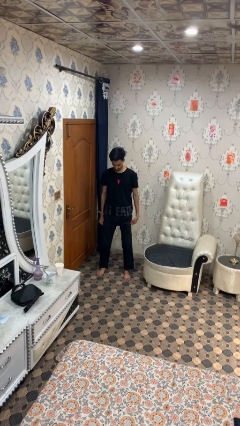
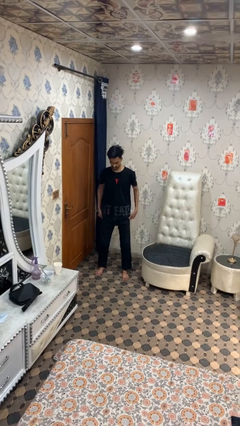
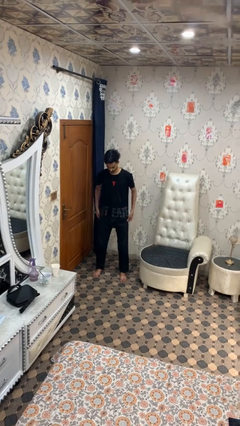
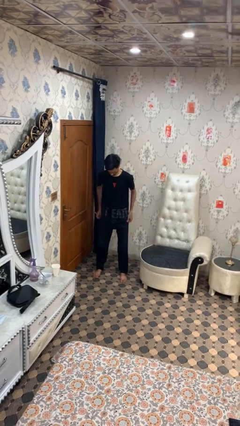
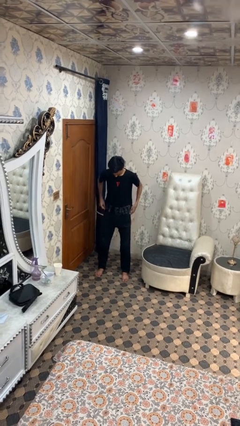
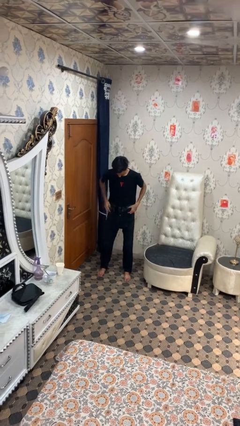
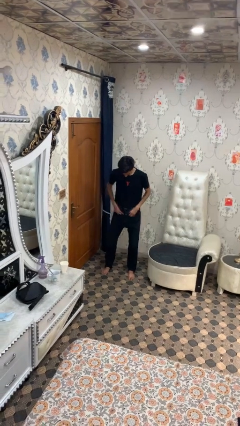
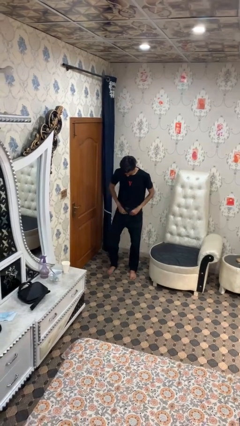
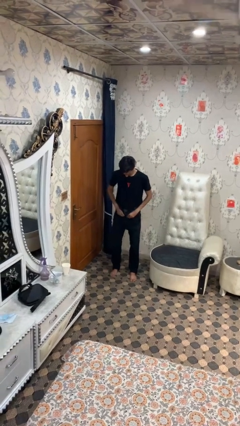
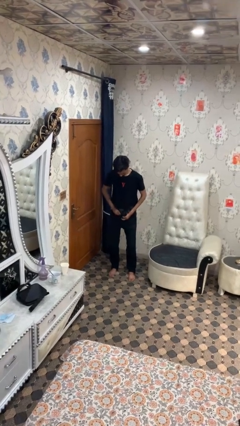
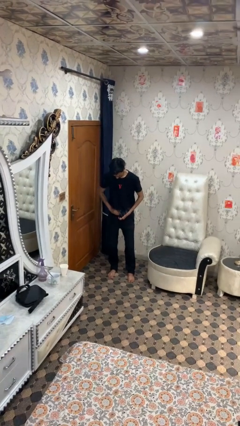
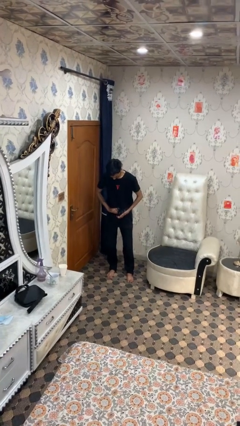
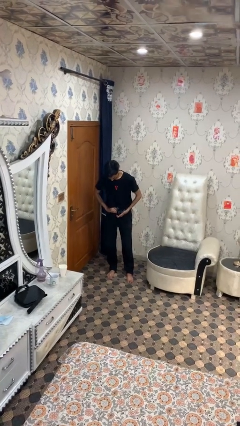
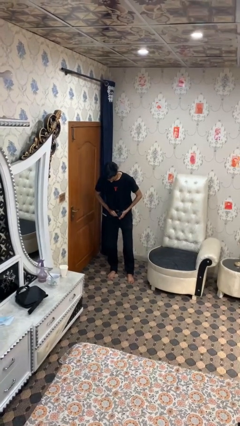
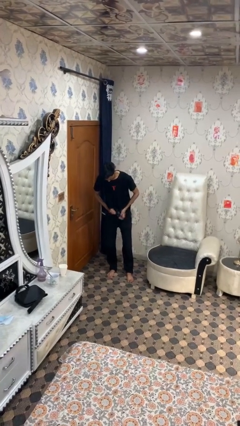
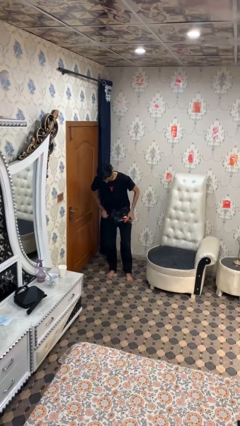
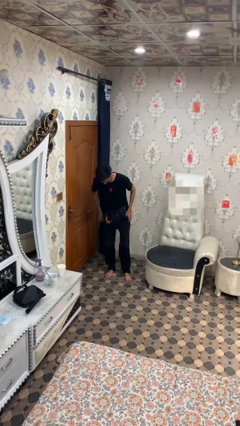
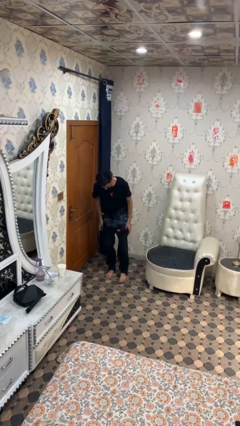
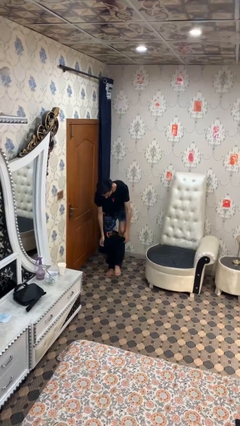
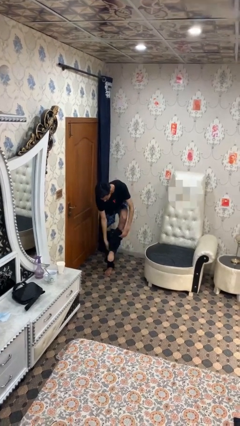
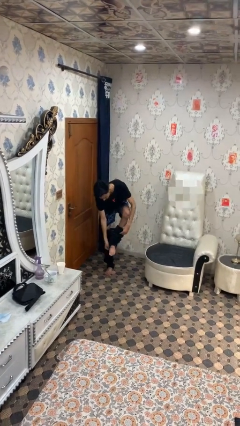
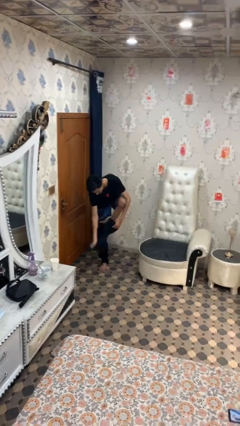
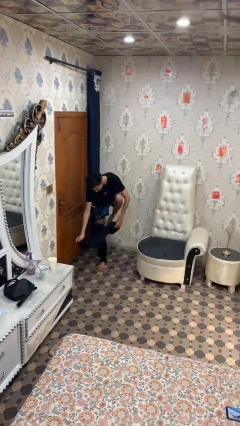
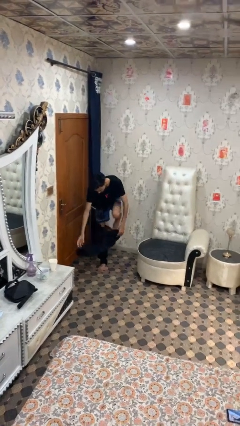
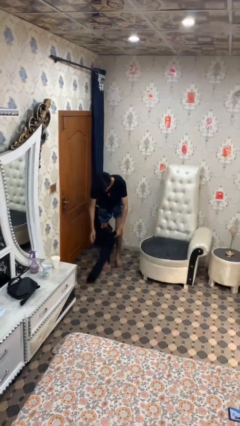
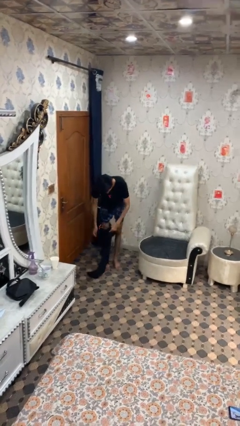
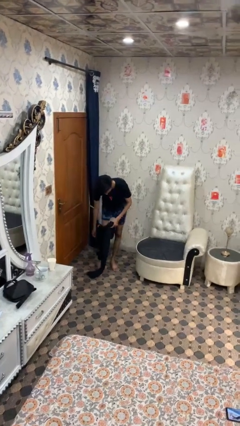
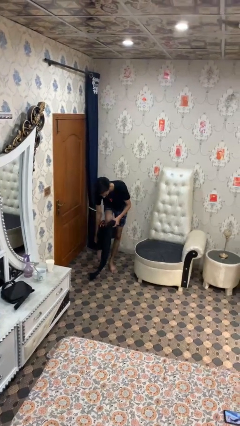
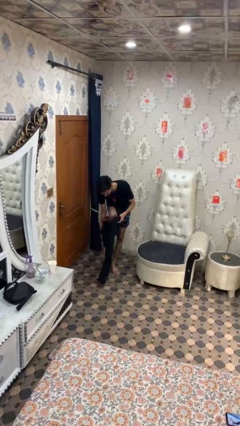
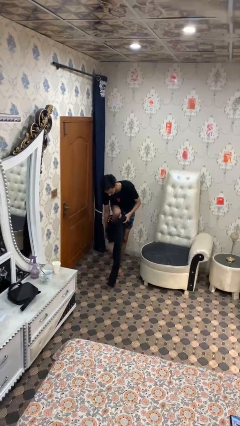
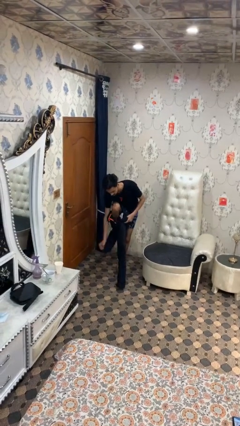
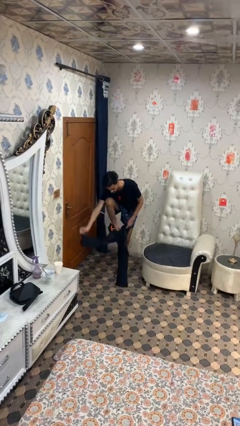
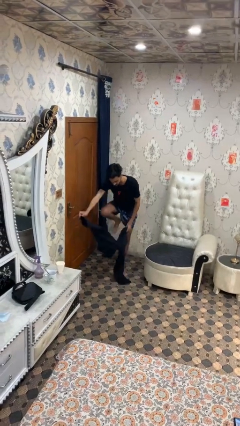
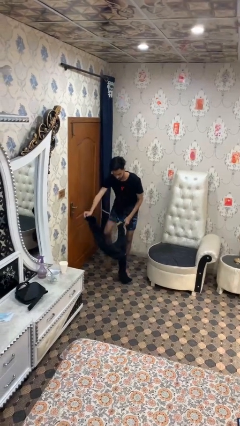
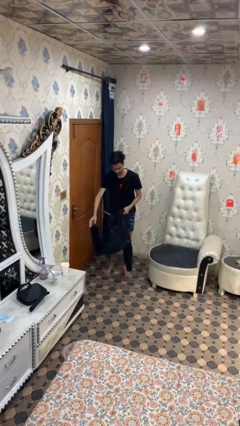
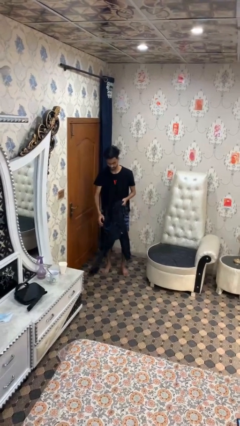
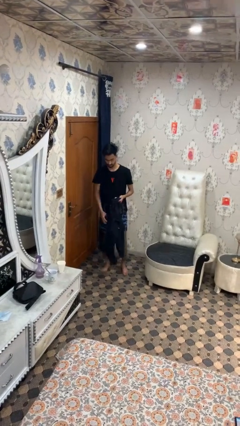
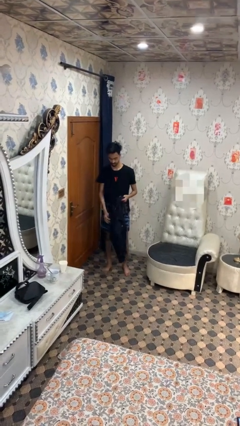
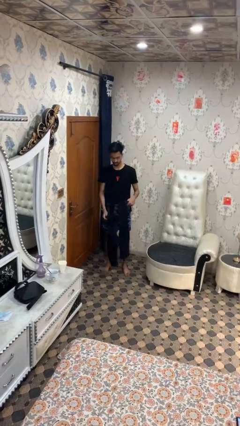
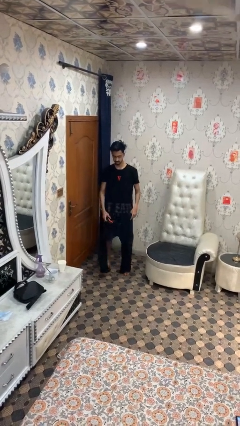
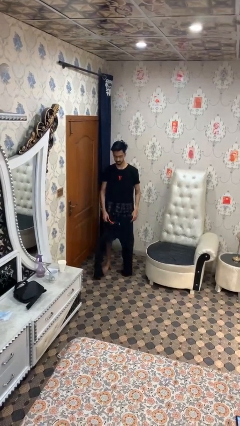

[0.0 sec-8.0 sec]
person takes off pants

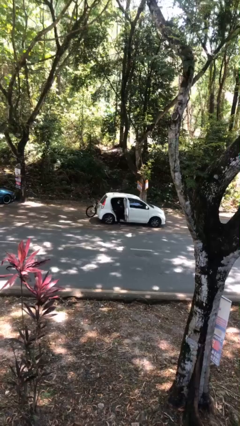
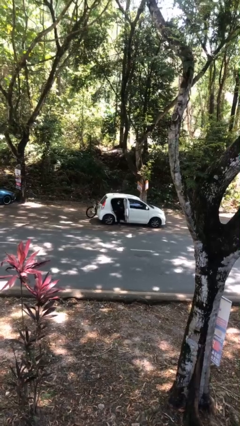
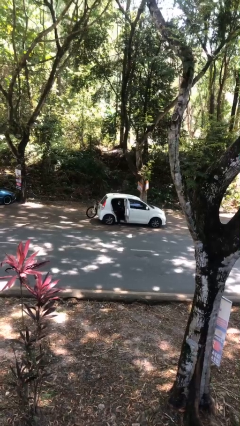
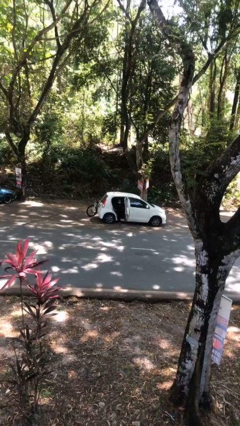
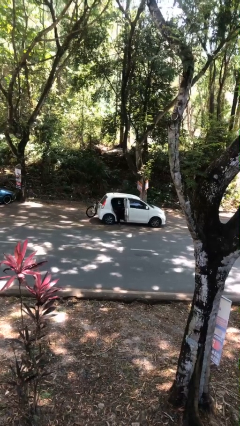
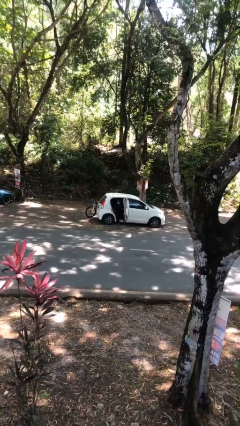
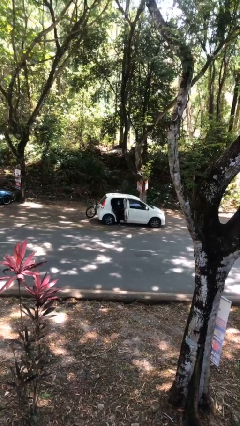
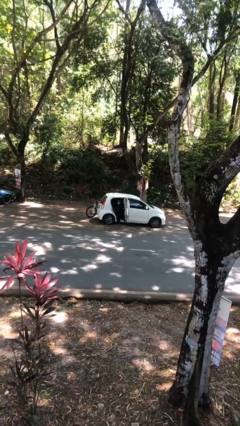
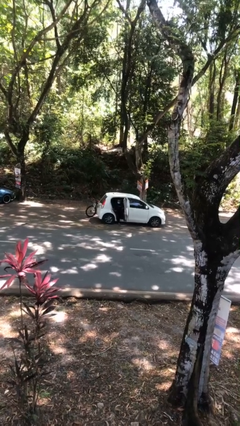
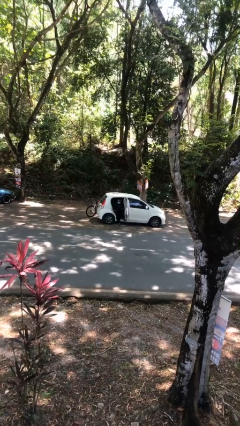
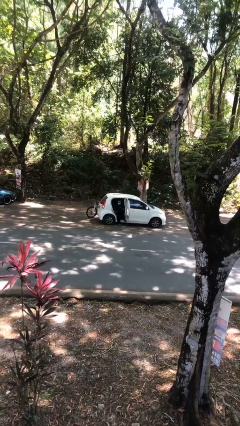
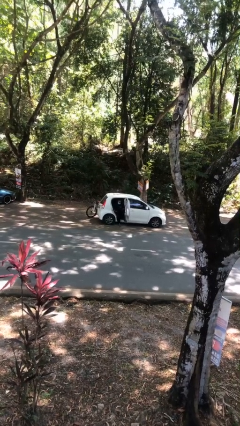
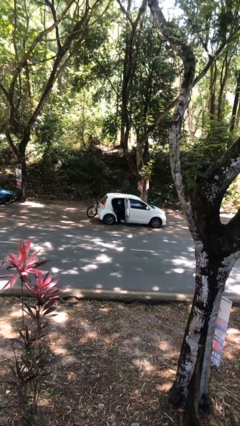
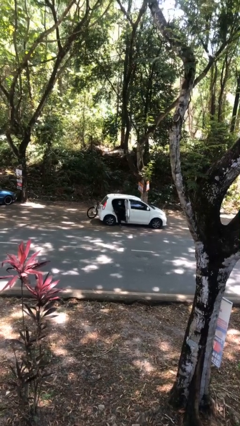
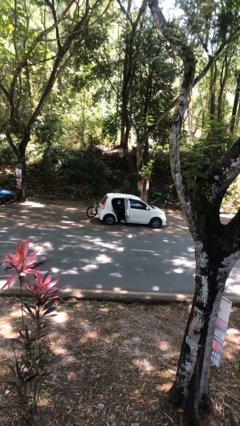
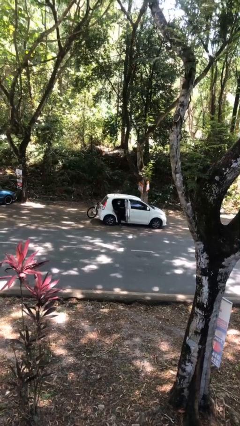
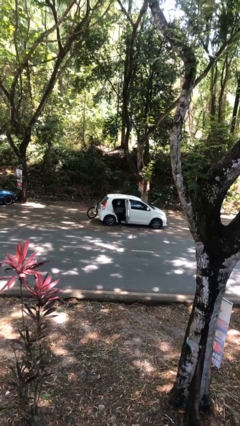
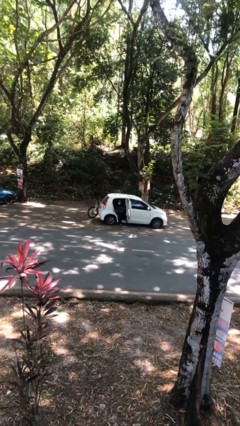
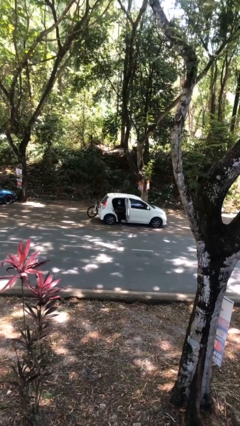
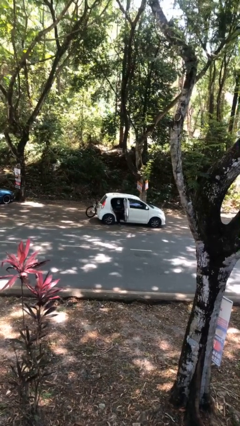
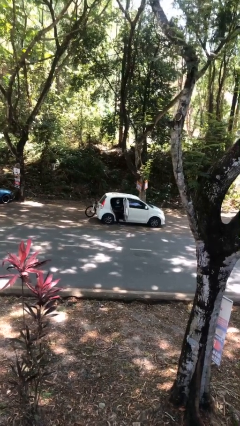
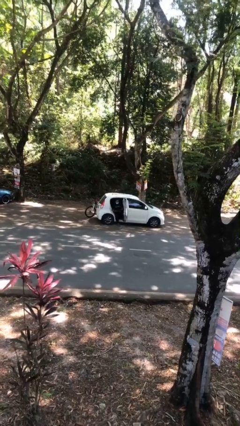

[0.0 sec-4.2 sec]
person interacts with laptop

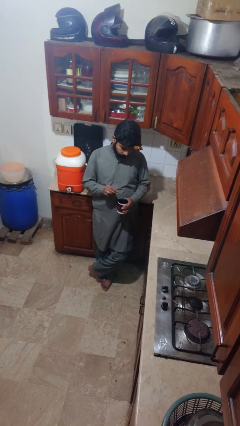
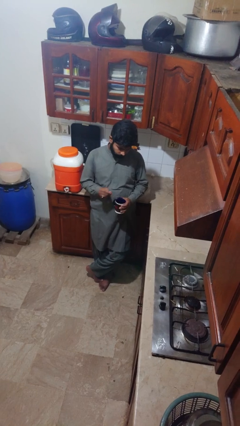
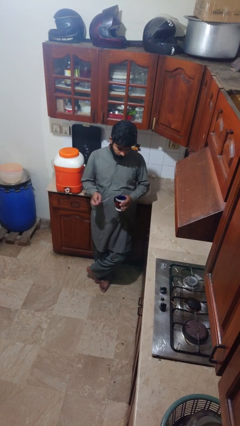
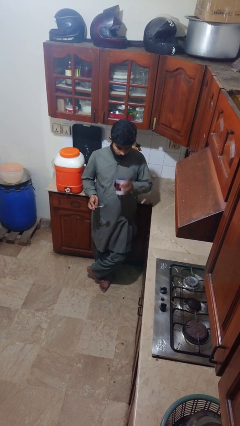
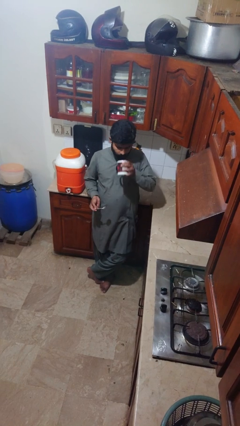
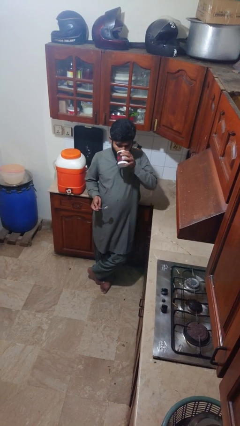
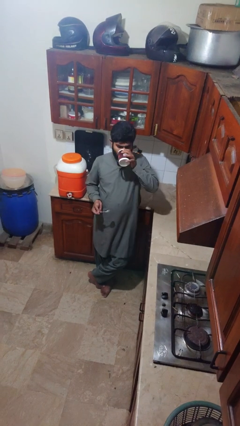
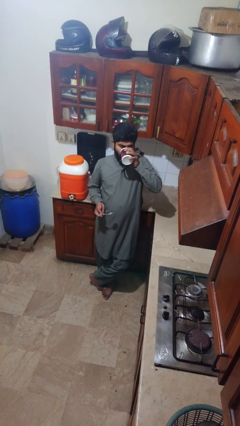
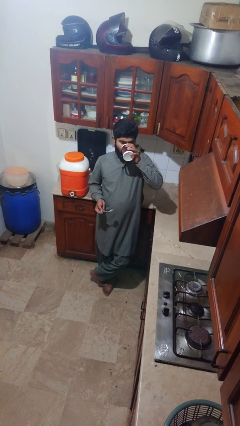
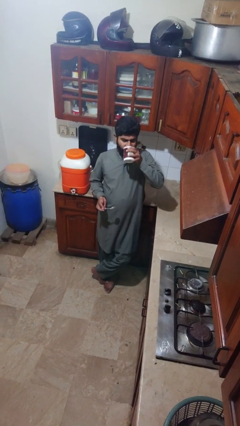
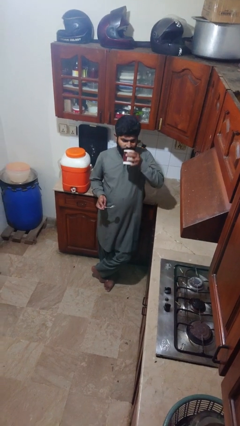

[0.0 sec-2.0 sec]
person drinks from mug

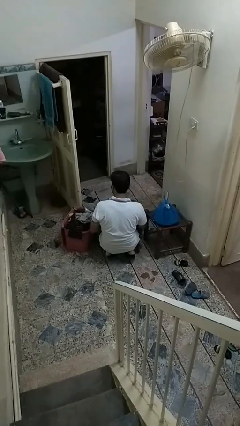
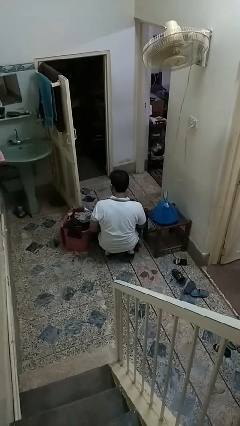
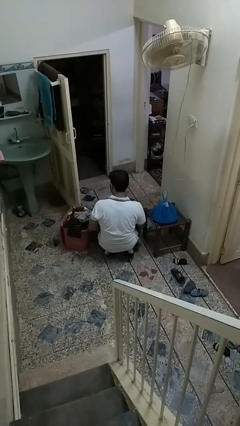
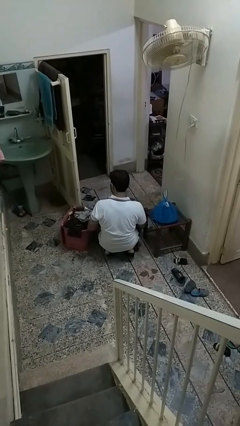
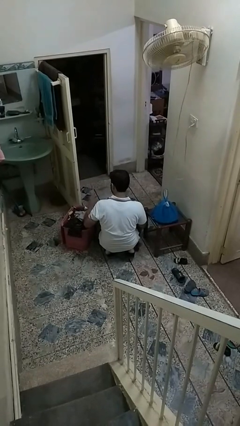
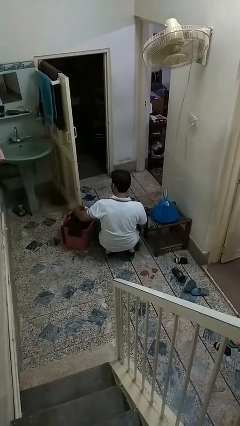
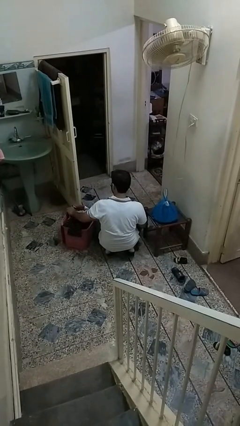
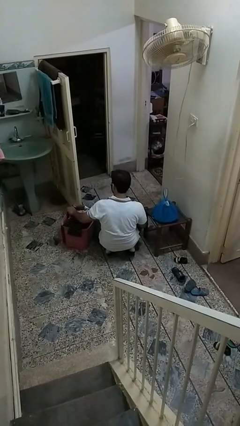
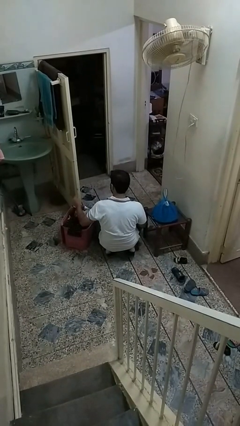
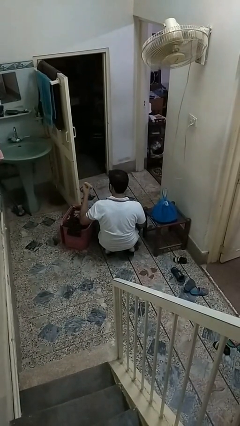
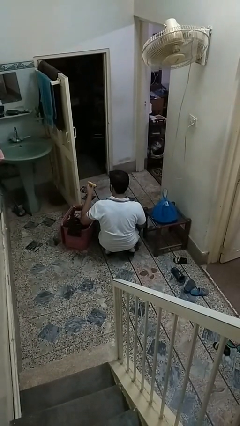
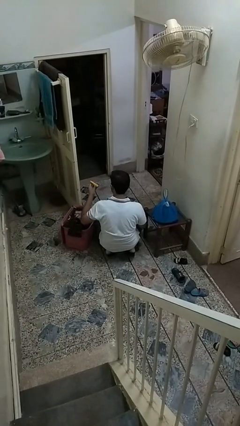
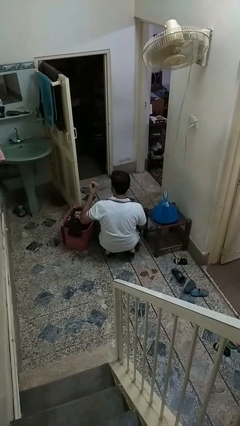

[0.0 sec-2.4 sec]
person takes object from basket

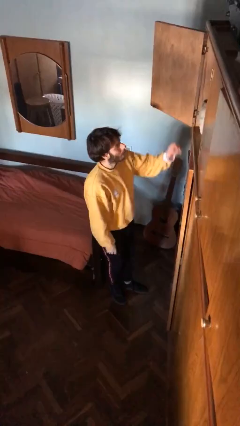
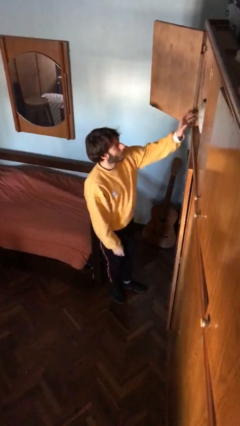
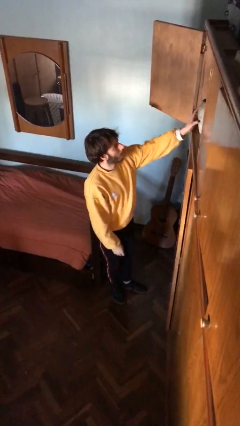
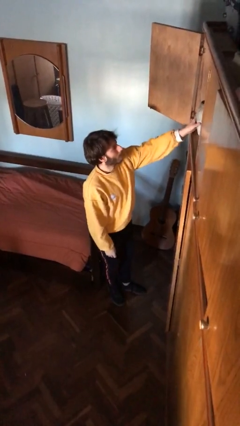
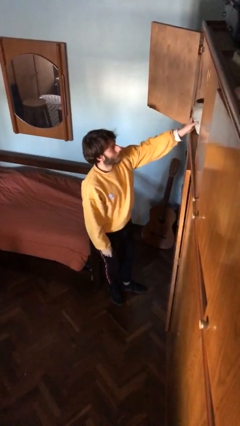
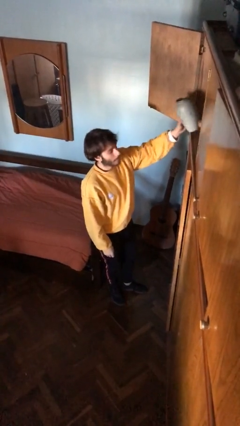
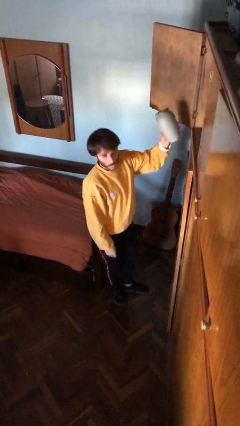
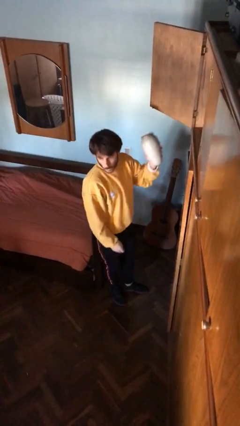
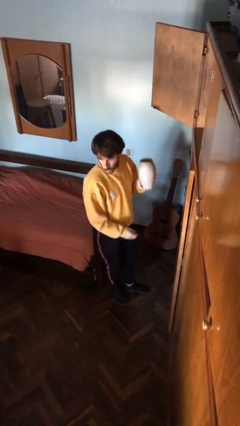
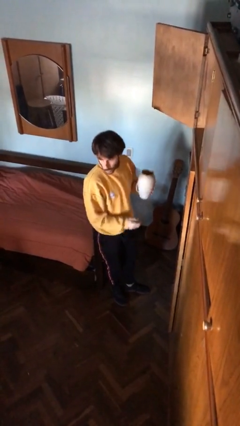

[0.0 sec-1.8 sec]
person picks up object from cabinet
